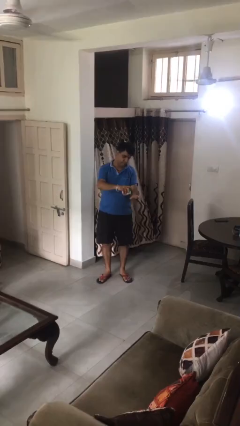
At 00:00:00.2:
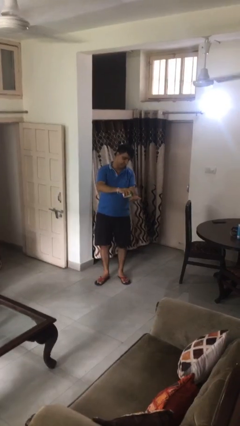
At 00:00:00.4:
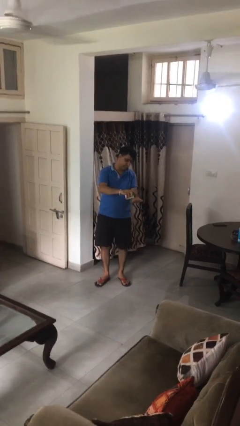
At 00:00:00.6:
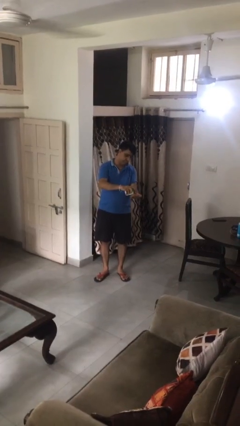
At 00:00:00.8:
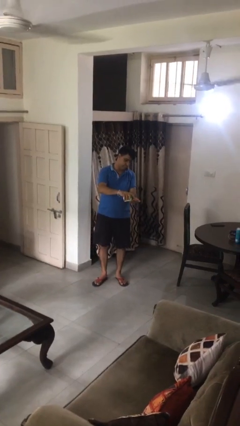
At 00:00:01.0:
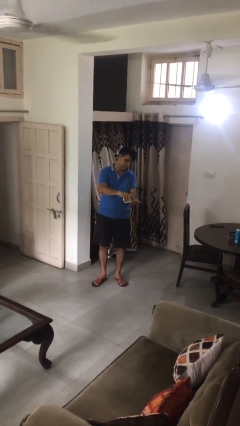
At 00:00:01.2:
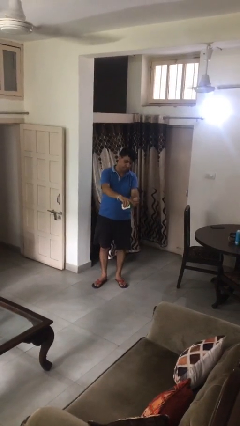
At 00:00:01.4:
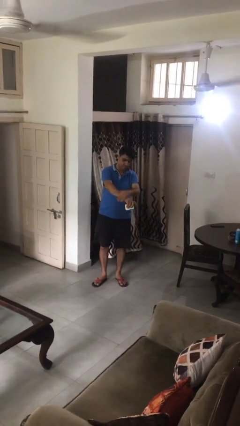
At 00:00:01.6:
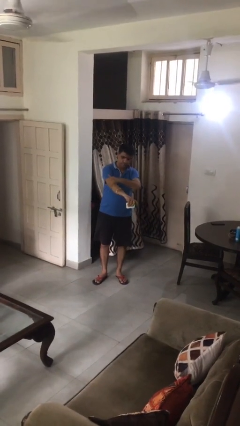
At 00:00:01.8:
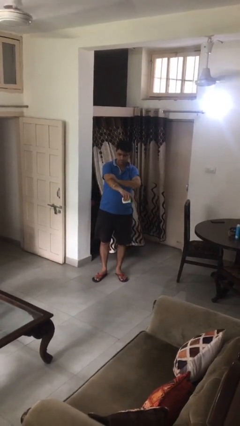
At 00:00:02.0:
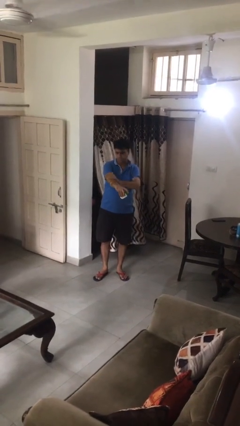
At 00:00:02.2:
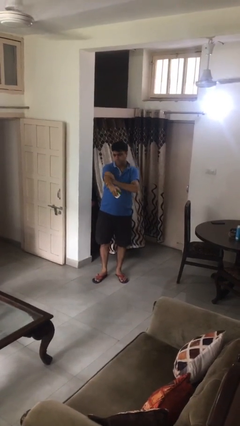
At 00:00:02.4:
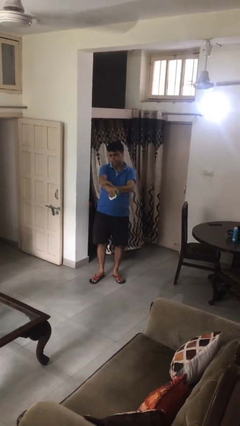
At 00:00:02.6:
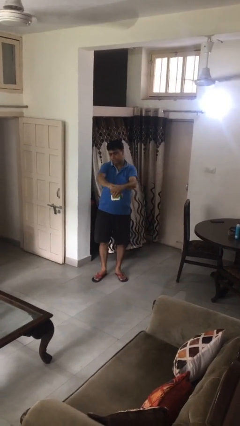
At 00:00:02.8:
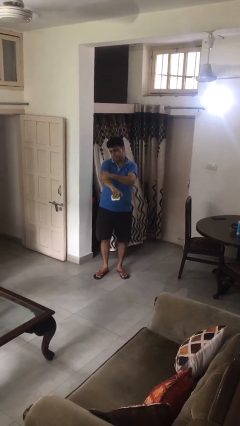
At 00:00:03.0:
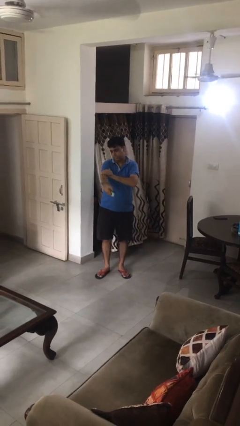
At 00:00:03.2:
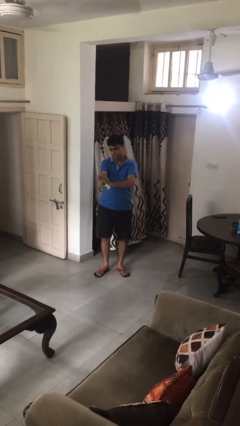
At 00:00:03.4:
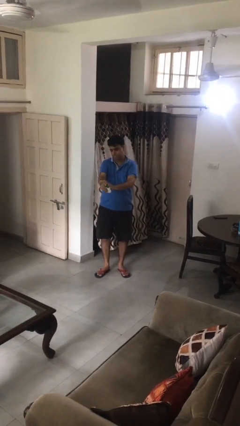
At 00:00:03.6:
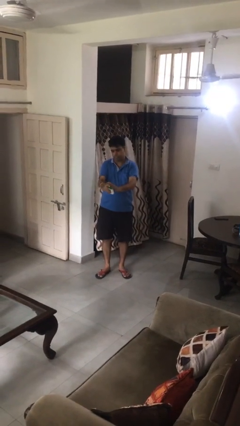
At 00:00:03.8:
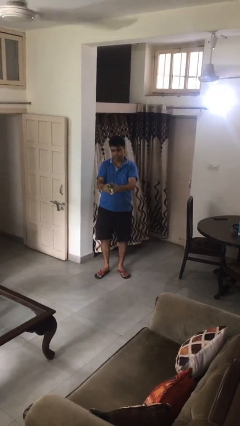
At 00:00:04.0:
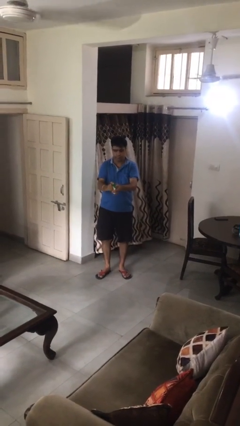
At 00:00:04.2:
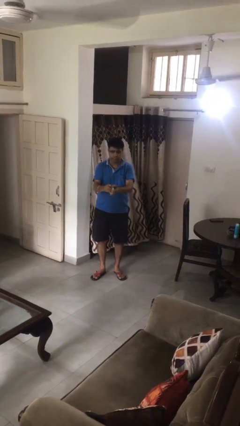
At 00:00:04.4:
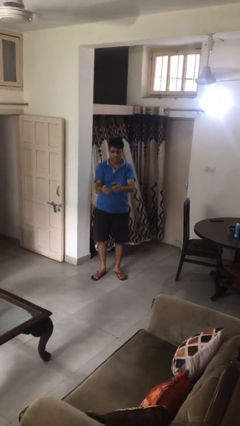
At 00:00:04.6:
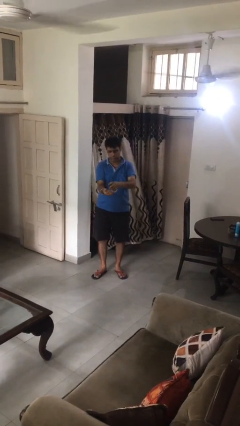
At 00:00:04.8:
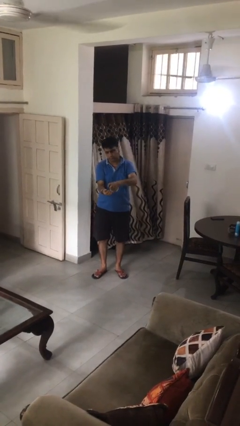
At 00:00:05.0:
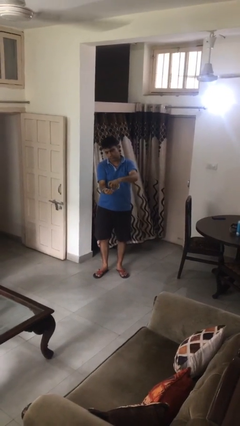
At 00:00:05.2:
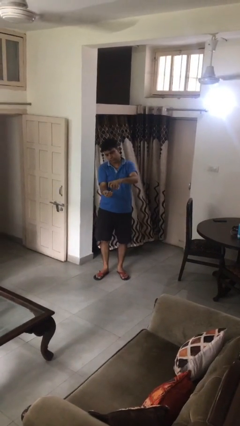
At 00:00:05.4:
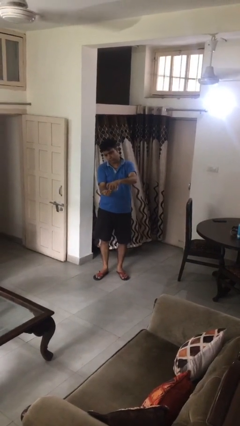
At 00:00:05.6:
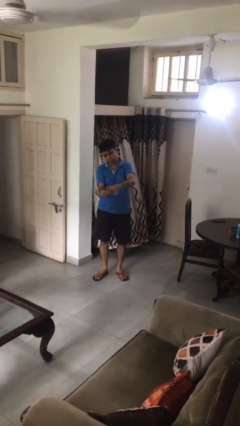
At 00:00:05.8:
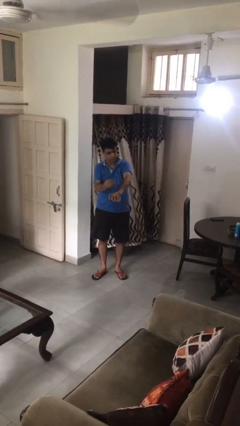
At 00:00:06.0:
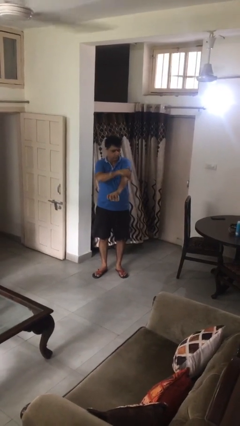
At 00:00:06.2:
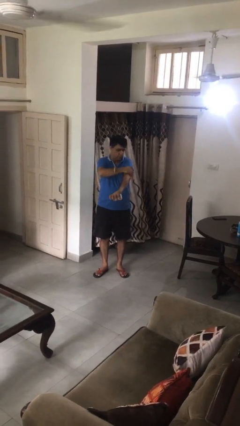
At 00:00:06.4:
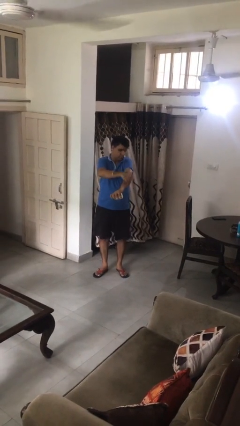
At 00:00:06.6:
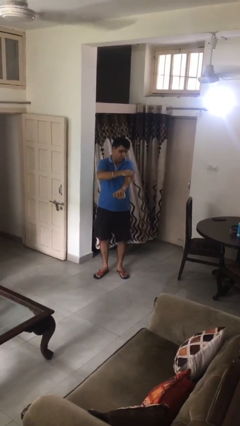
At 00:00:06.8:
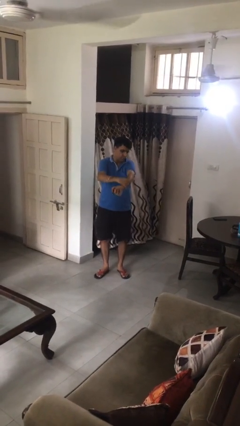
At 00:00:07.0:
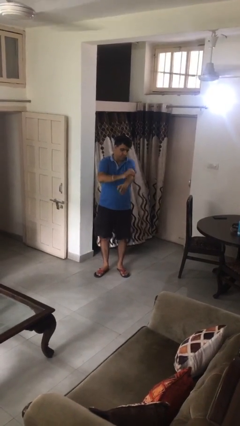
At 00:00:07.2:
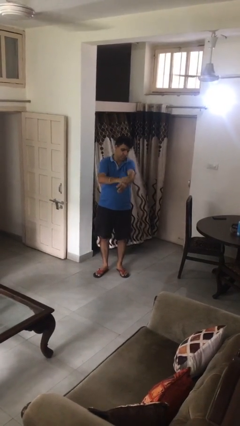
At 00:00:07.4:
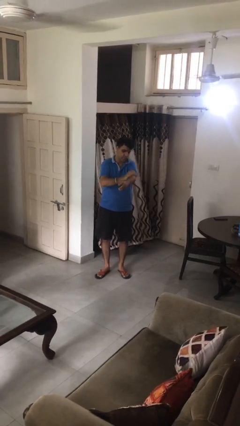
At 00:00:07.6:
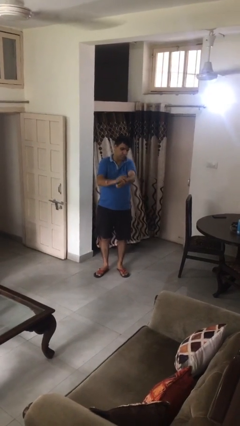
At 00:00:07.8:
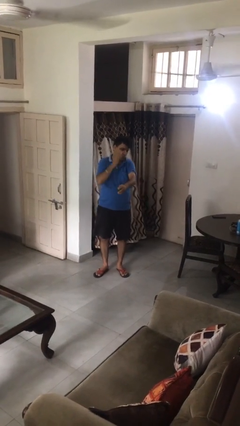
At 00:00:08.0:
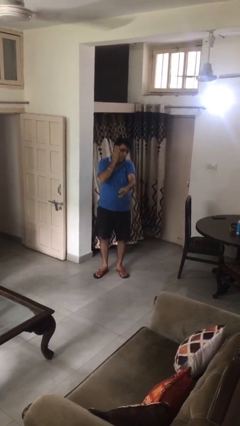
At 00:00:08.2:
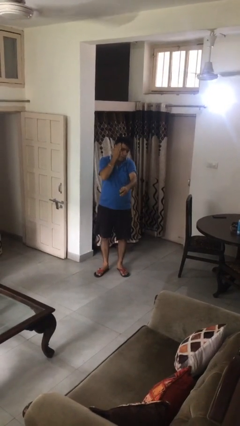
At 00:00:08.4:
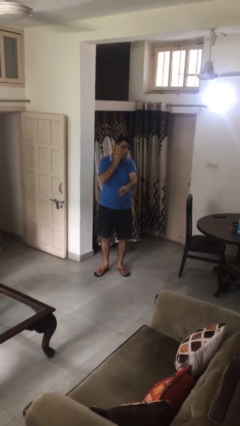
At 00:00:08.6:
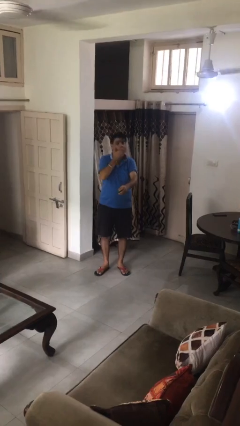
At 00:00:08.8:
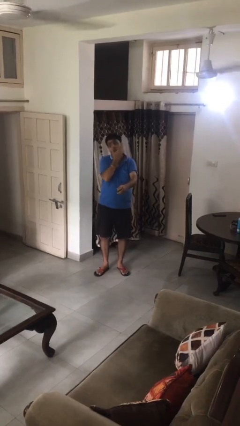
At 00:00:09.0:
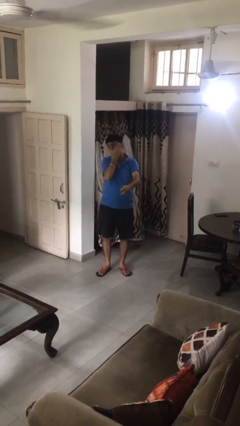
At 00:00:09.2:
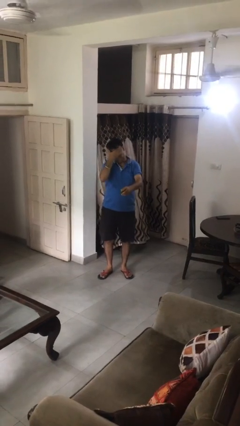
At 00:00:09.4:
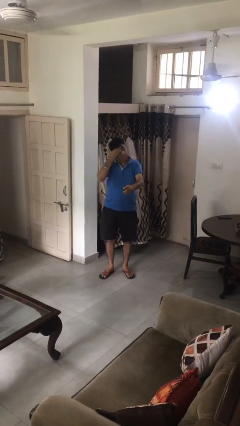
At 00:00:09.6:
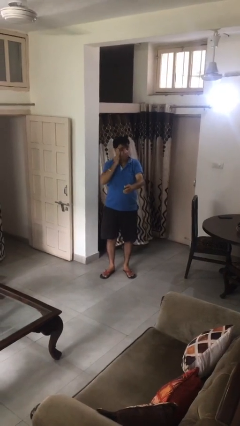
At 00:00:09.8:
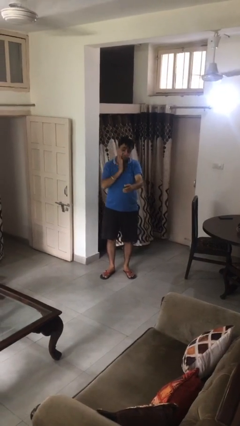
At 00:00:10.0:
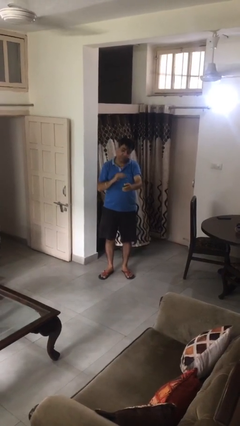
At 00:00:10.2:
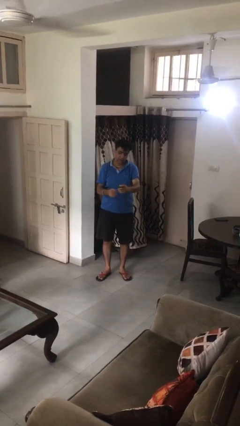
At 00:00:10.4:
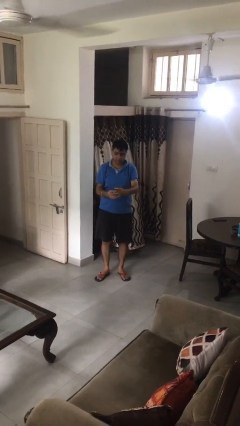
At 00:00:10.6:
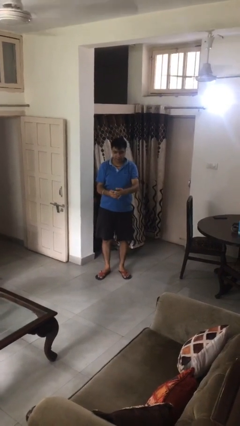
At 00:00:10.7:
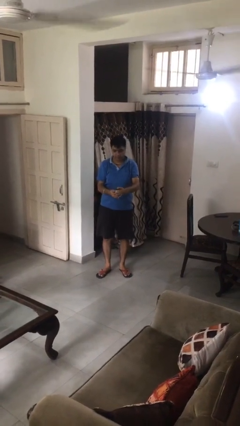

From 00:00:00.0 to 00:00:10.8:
person applies sunscreen

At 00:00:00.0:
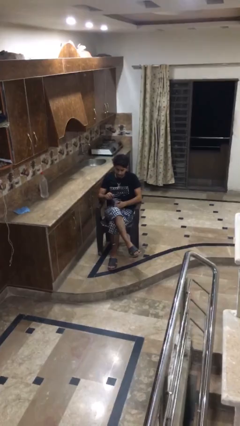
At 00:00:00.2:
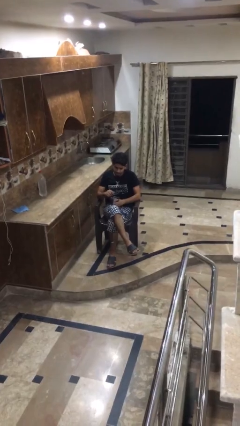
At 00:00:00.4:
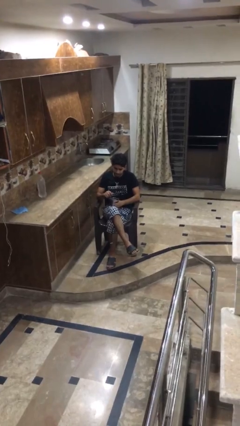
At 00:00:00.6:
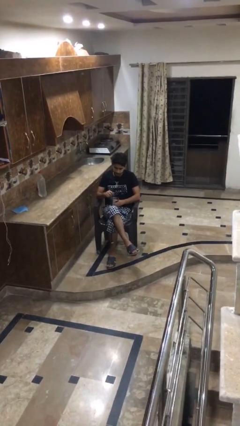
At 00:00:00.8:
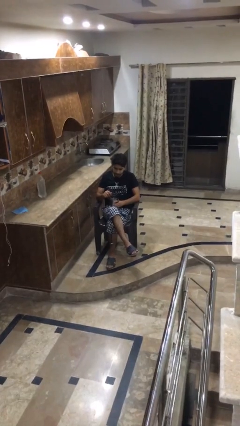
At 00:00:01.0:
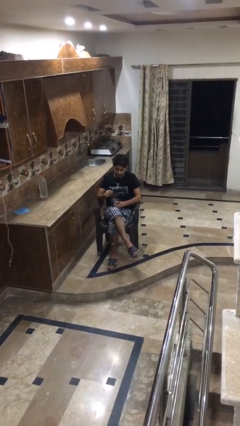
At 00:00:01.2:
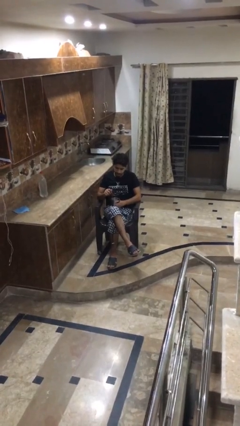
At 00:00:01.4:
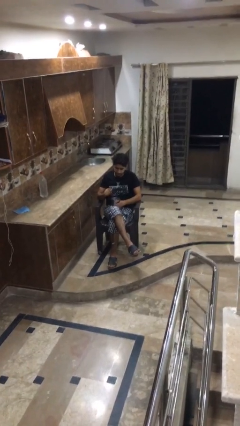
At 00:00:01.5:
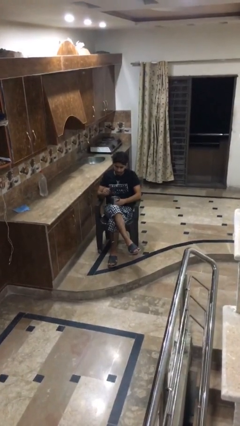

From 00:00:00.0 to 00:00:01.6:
person stirs mug

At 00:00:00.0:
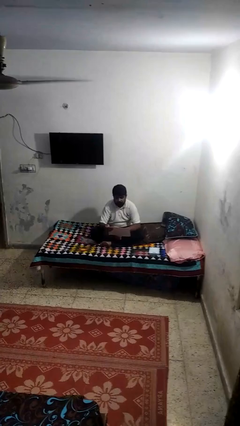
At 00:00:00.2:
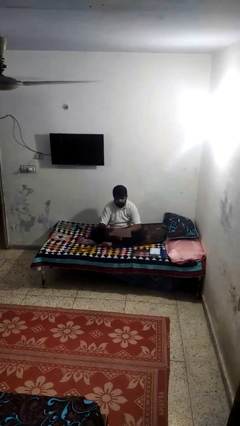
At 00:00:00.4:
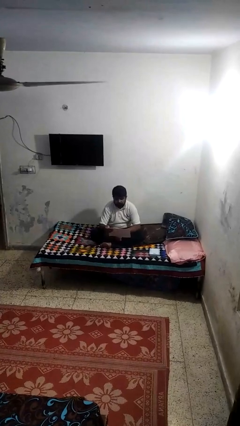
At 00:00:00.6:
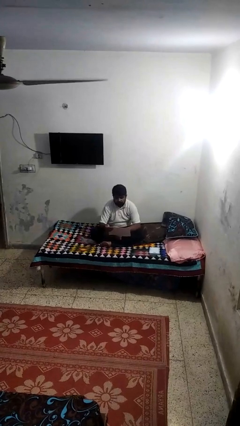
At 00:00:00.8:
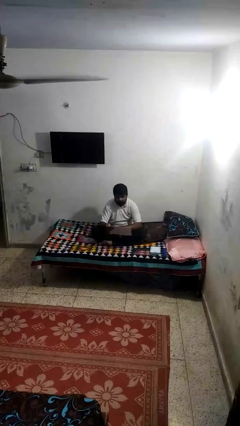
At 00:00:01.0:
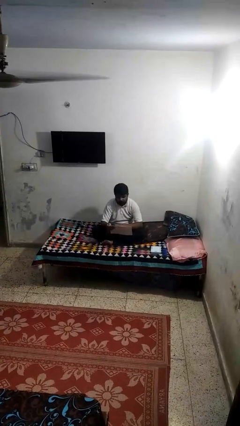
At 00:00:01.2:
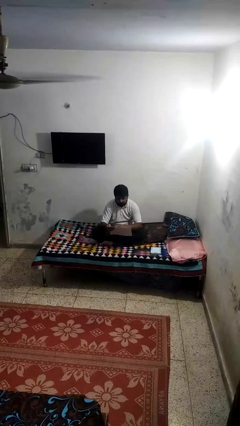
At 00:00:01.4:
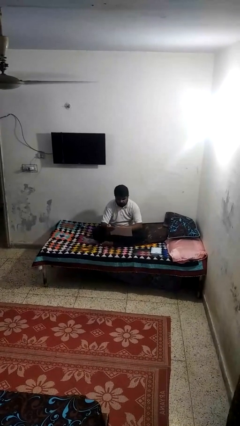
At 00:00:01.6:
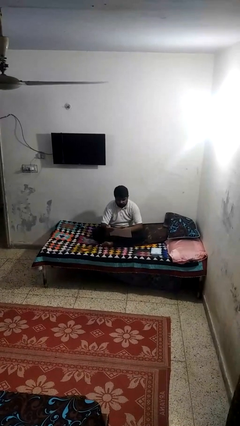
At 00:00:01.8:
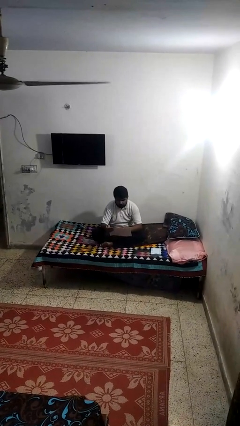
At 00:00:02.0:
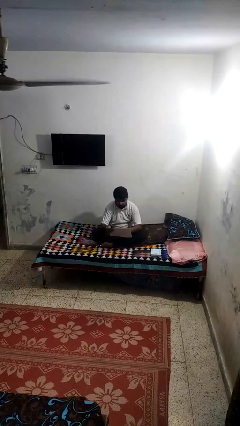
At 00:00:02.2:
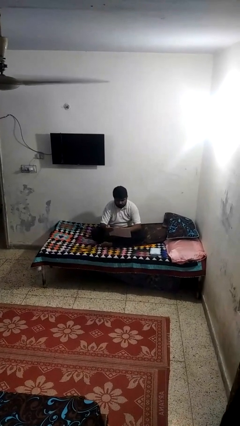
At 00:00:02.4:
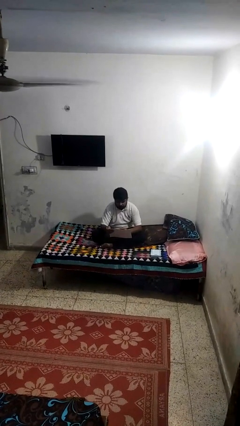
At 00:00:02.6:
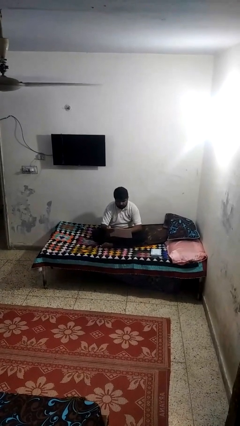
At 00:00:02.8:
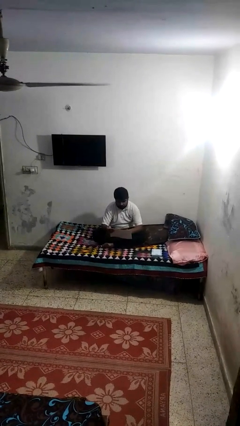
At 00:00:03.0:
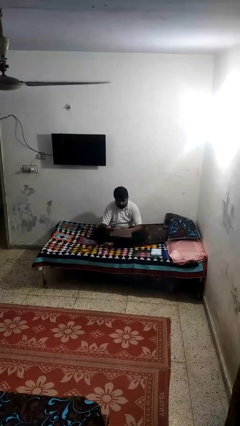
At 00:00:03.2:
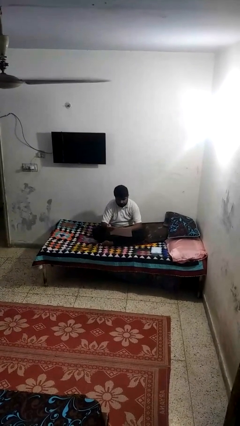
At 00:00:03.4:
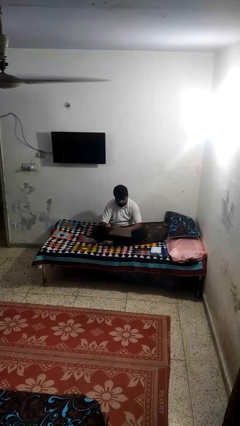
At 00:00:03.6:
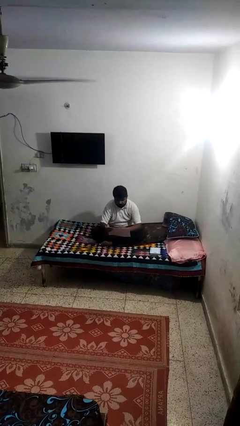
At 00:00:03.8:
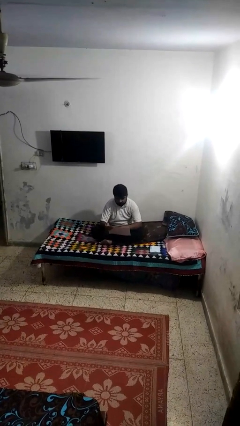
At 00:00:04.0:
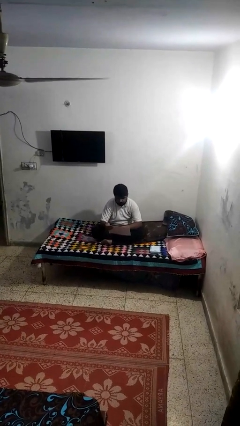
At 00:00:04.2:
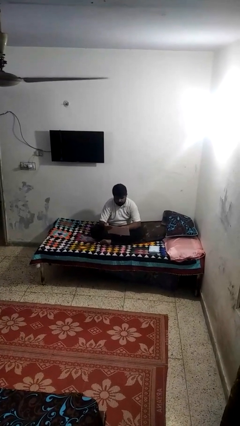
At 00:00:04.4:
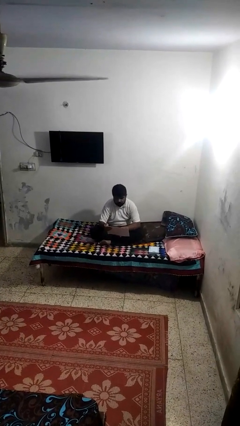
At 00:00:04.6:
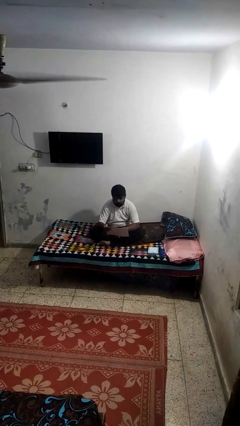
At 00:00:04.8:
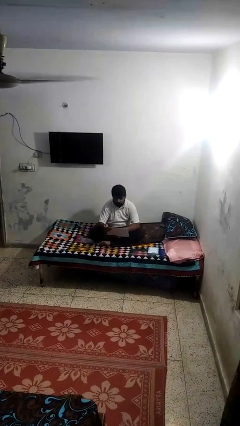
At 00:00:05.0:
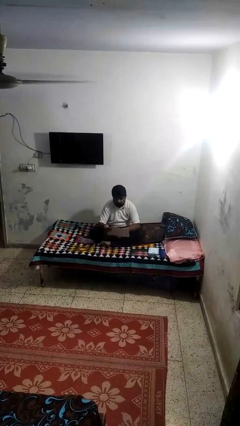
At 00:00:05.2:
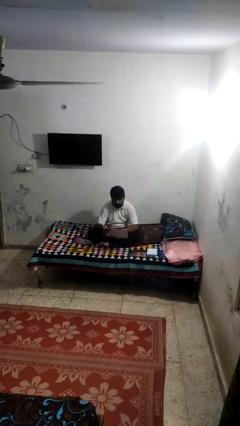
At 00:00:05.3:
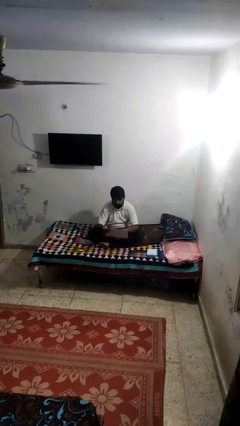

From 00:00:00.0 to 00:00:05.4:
person interacts with tablet
